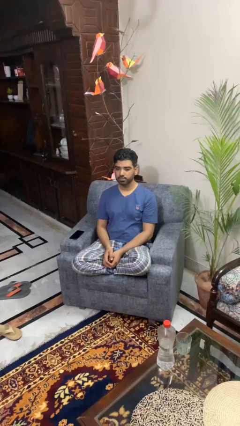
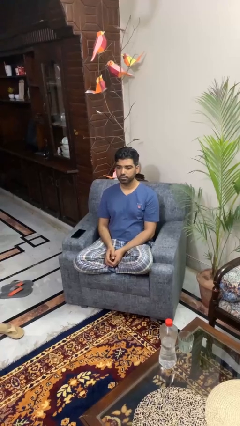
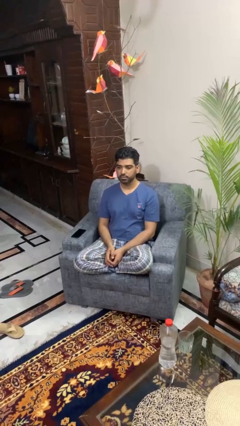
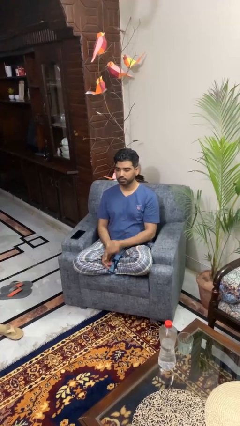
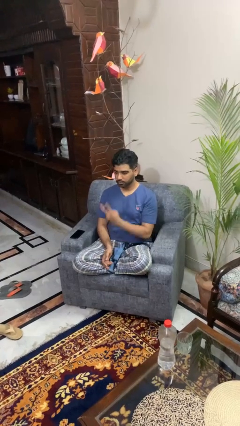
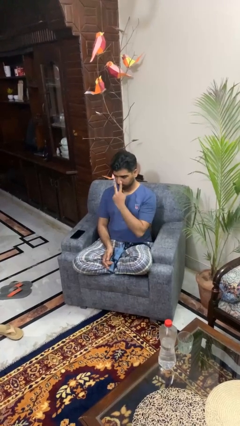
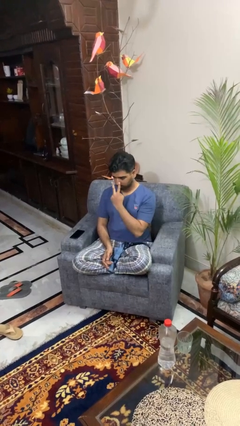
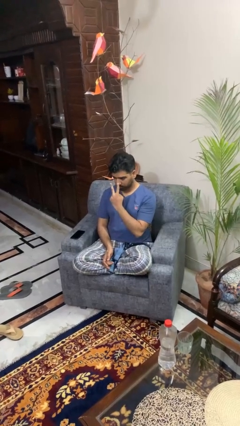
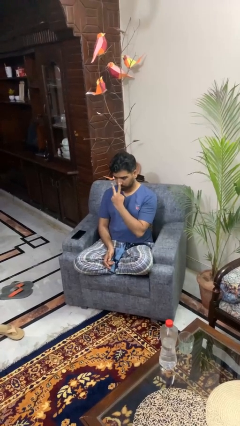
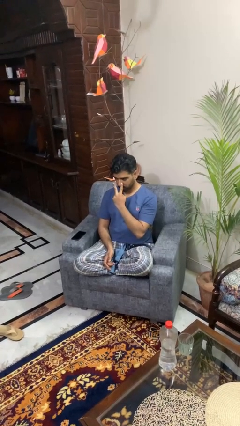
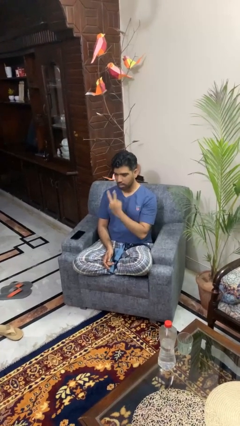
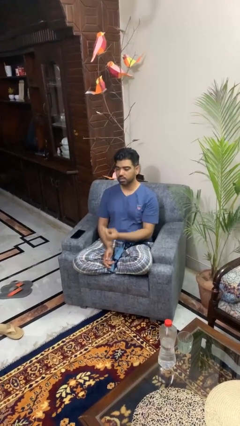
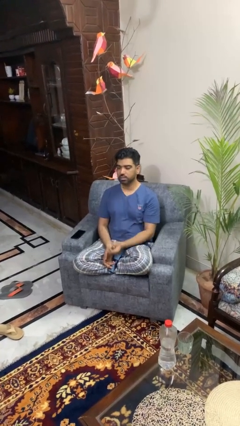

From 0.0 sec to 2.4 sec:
person gestures watch closely

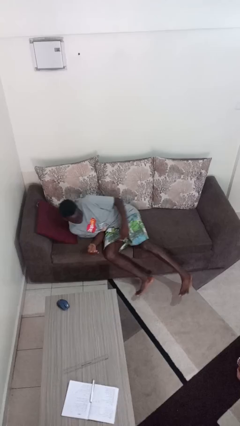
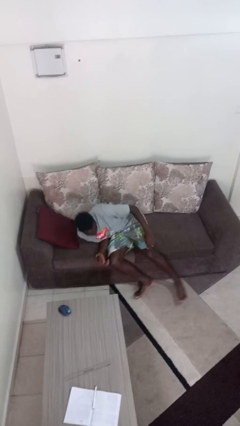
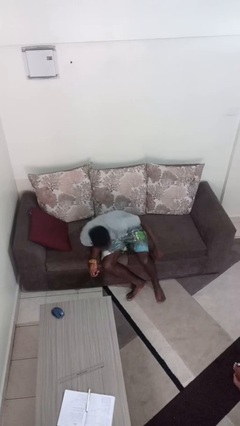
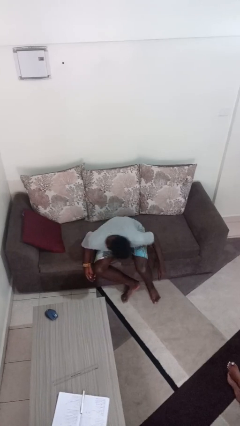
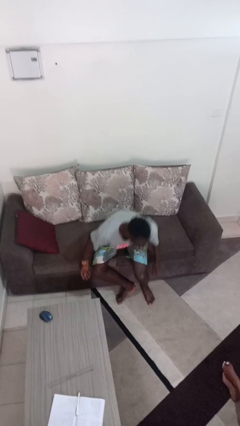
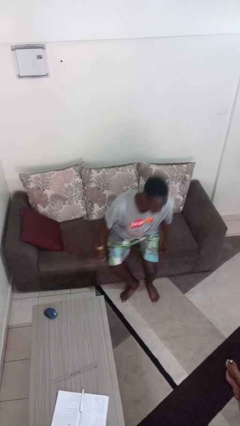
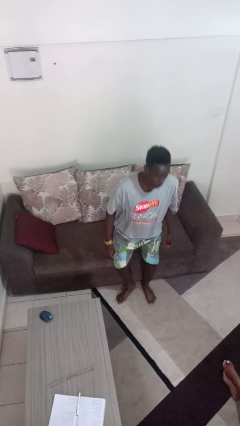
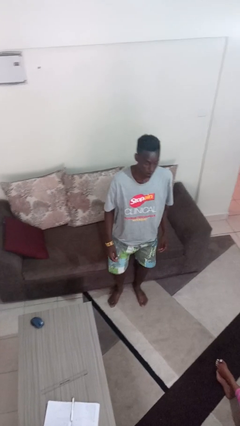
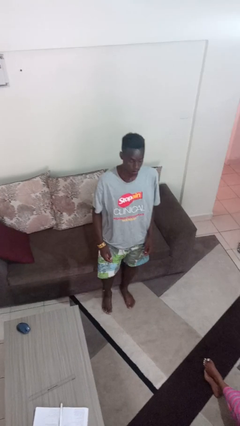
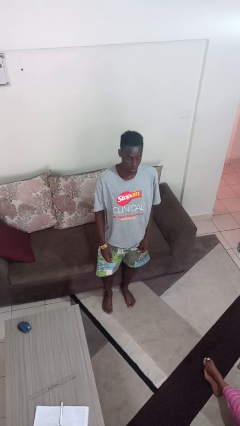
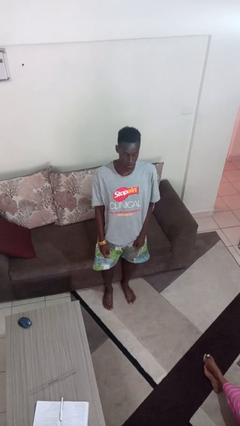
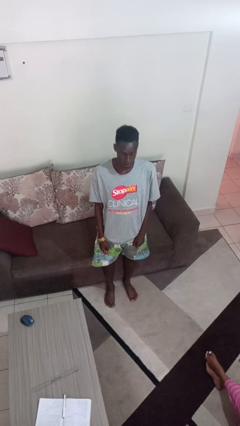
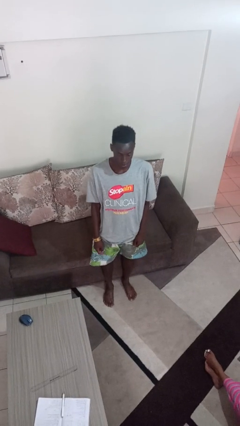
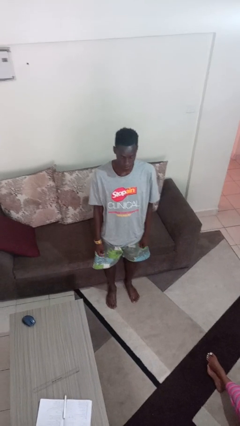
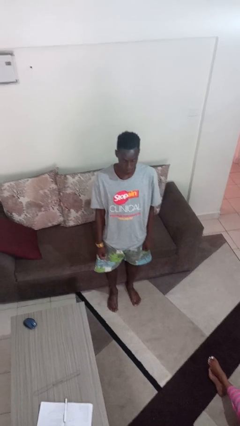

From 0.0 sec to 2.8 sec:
person stands up

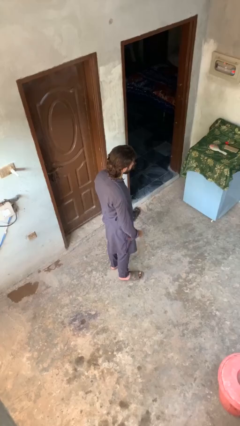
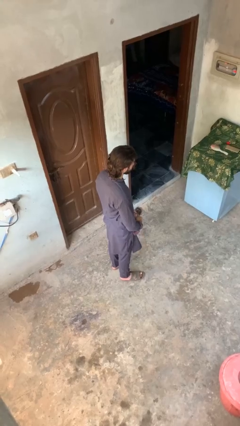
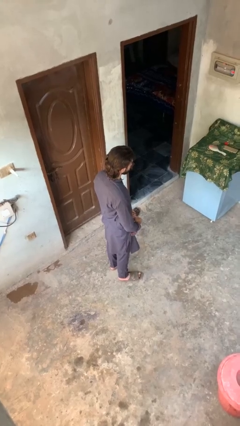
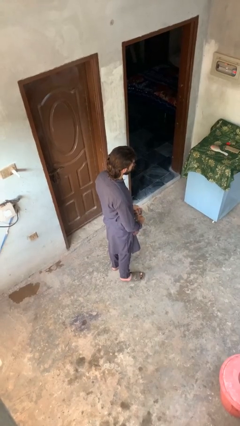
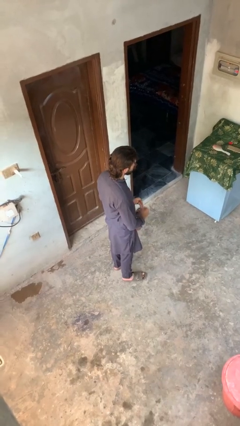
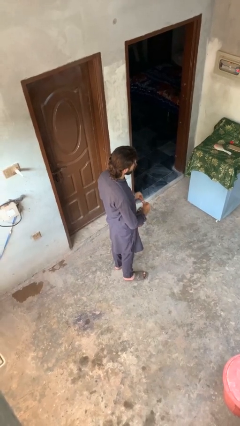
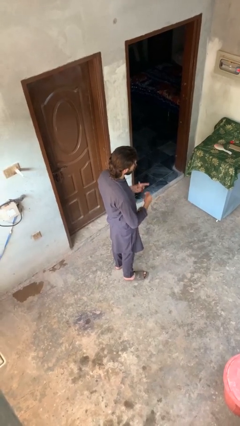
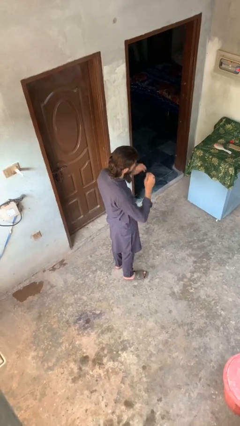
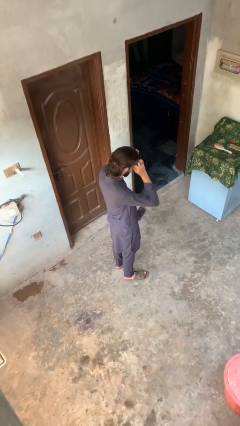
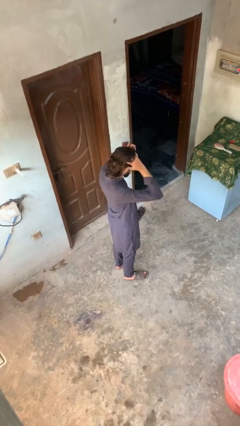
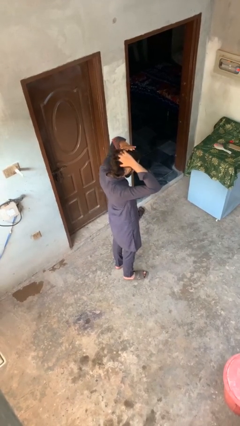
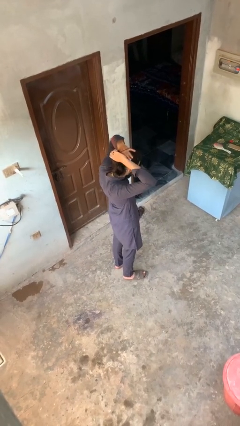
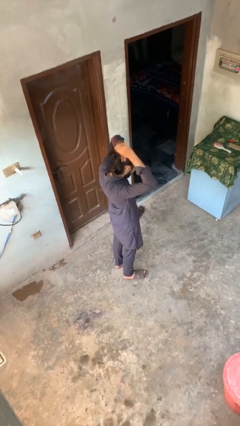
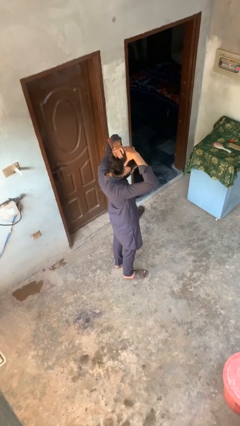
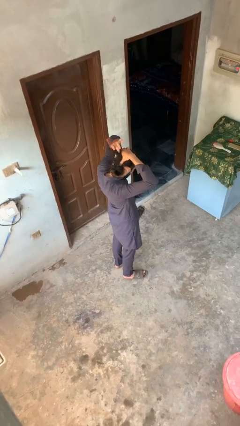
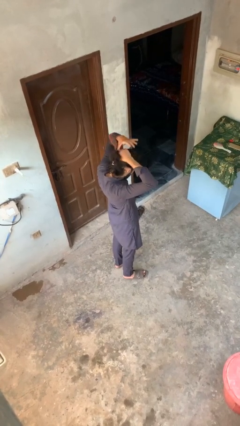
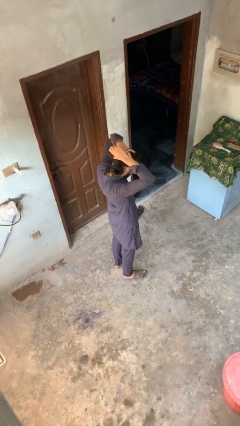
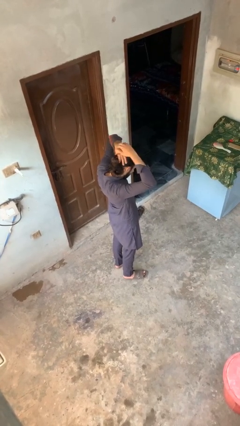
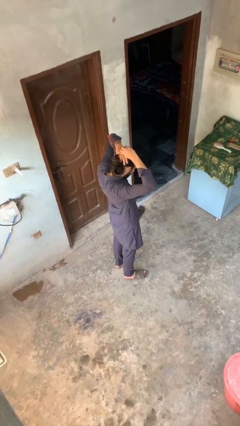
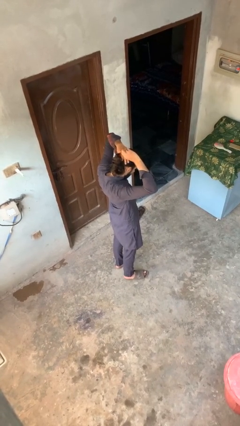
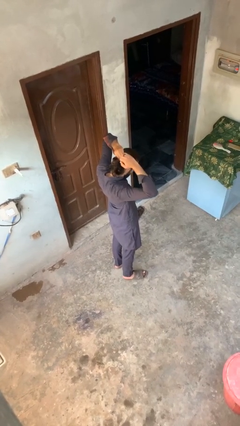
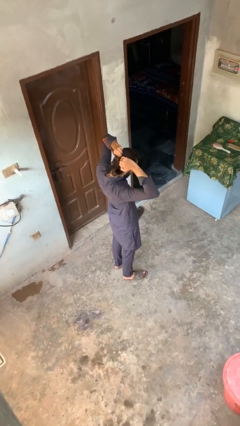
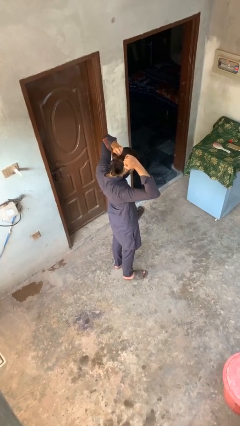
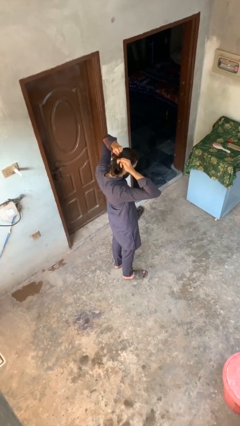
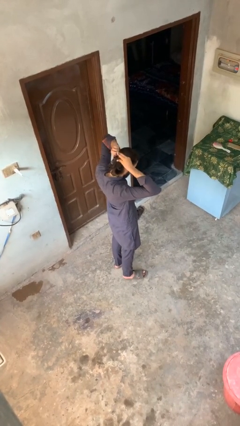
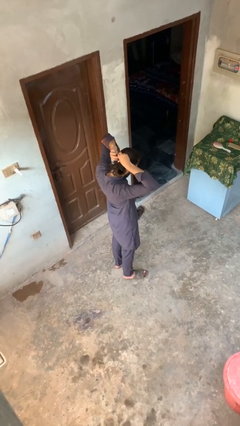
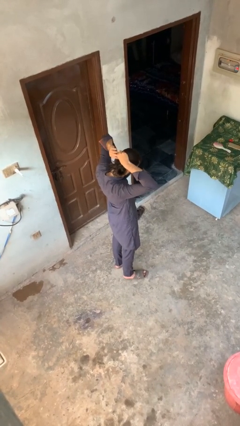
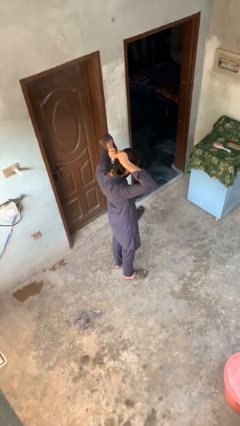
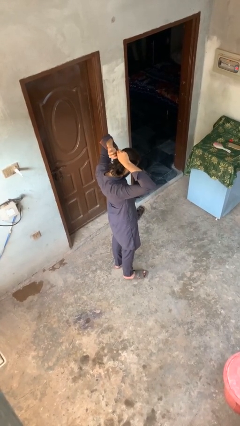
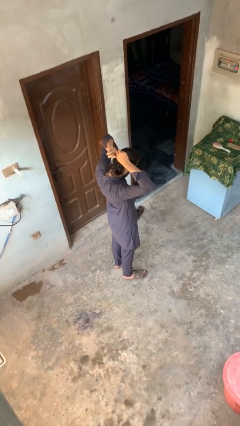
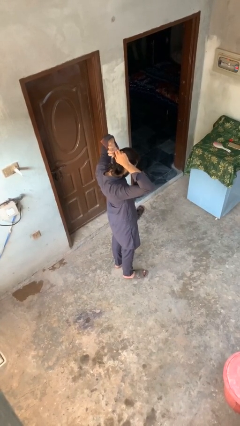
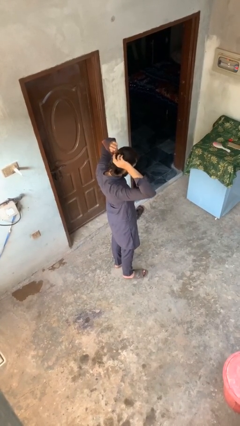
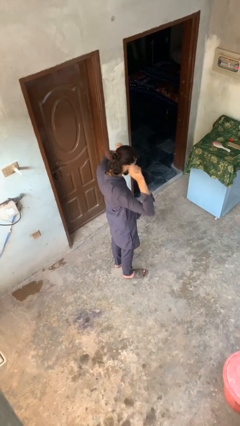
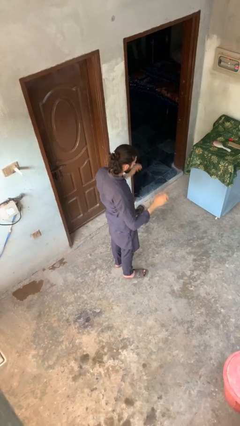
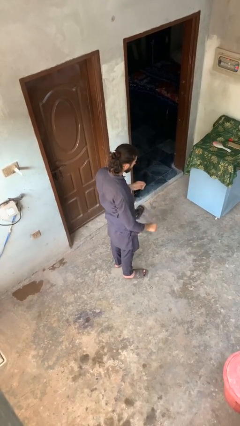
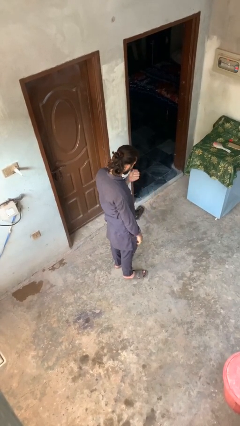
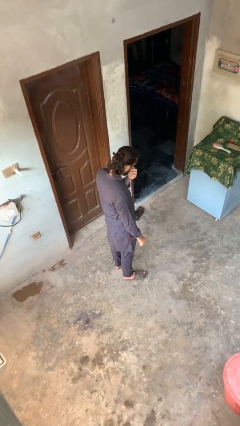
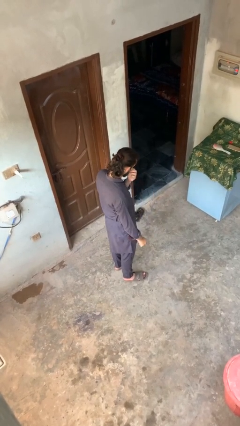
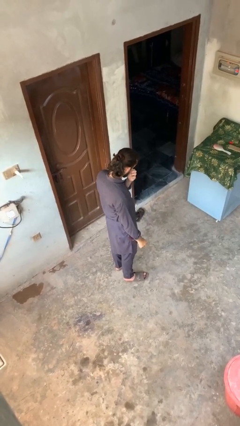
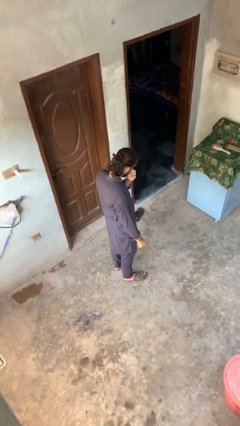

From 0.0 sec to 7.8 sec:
person puts hair in ponytail

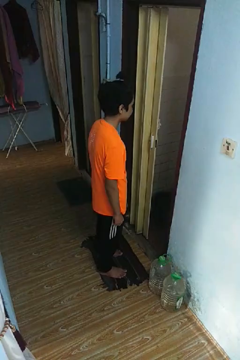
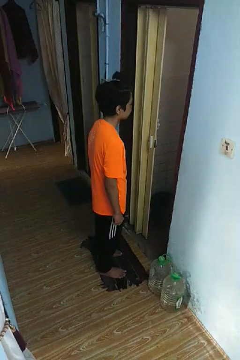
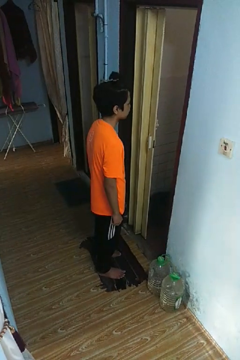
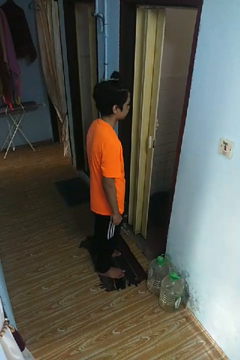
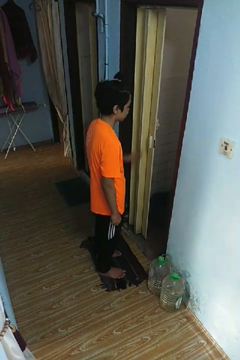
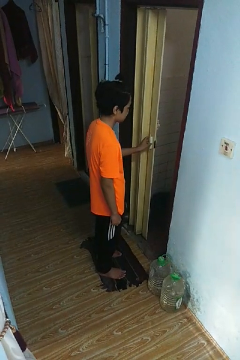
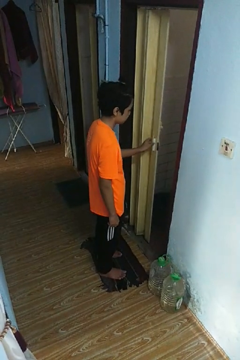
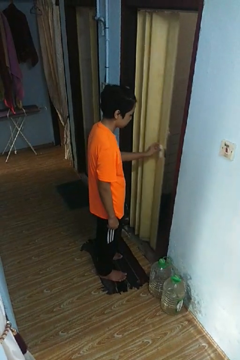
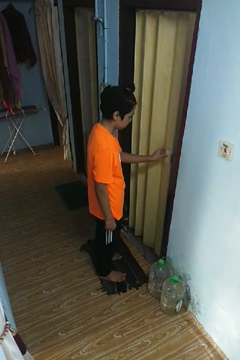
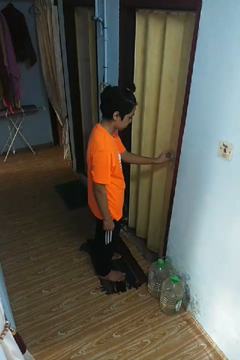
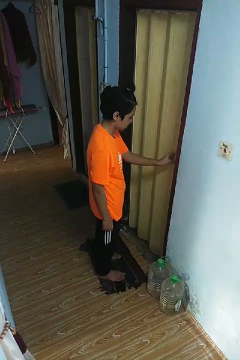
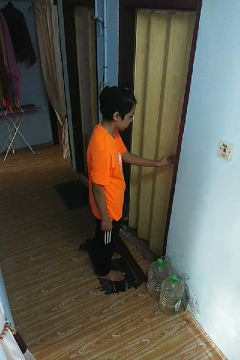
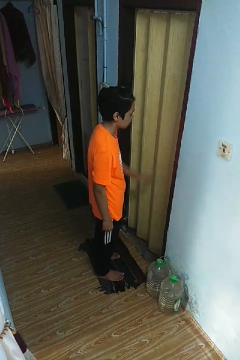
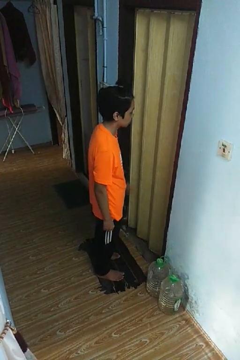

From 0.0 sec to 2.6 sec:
person closes sliding door

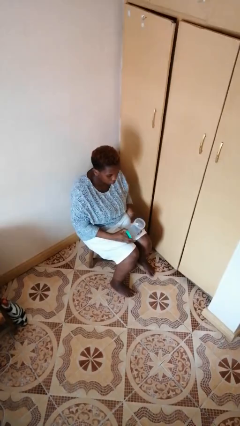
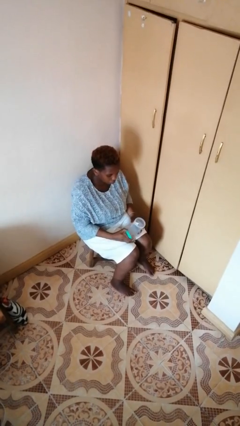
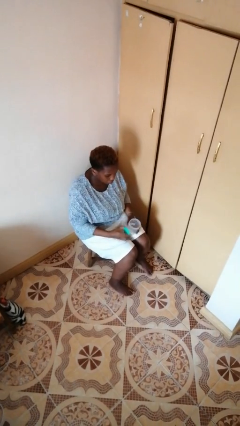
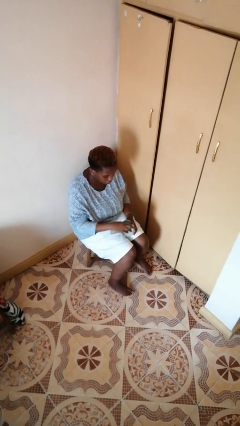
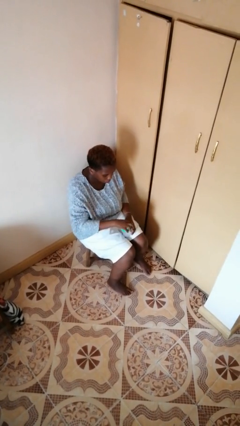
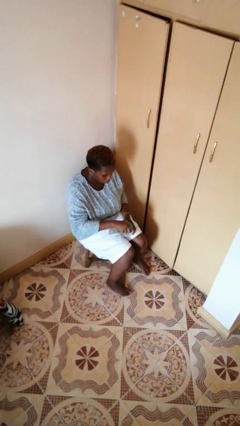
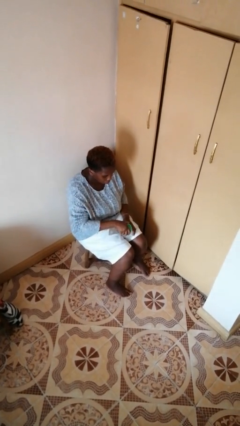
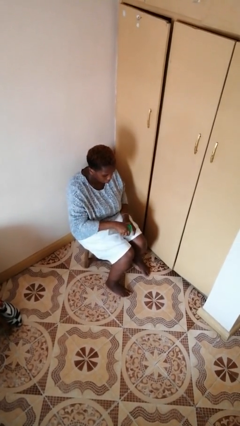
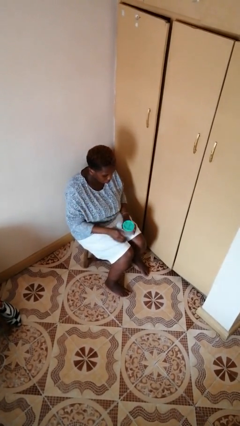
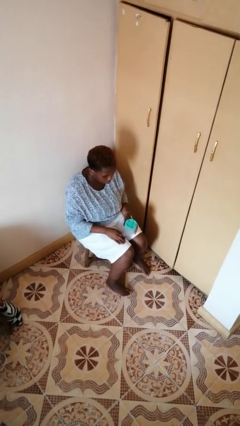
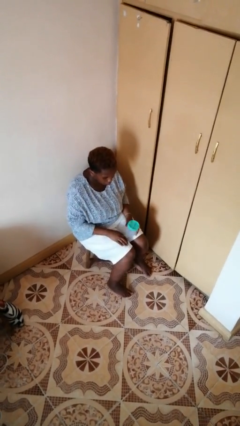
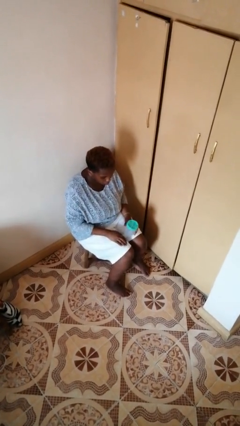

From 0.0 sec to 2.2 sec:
person closes jar

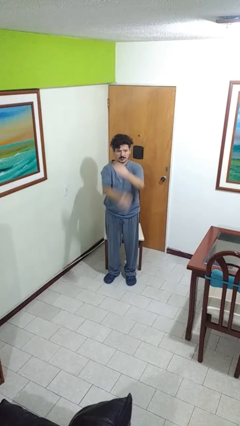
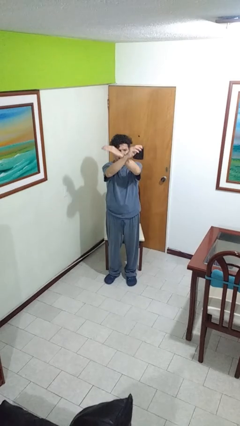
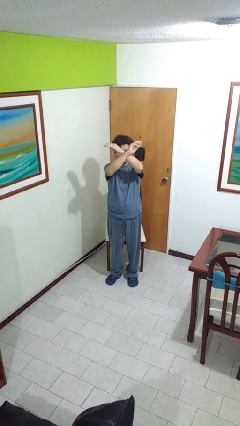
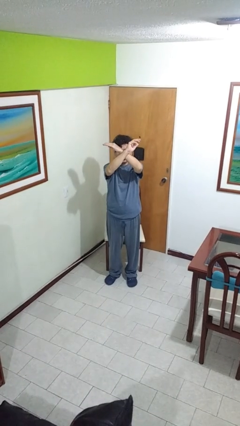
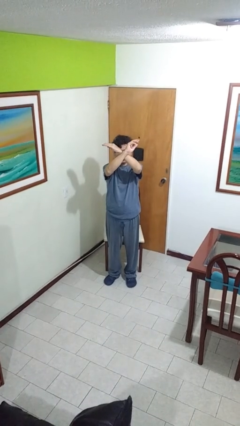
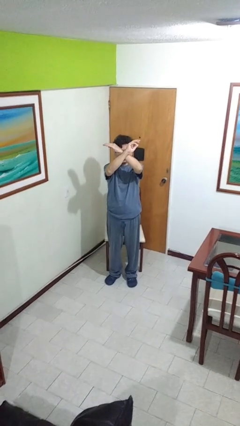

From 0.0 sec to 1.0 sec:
person gestures arms x
